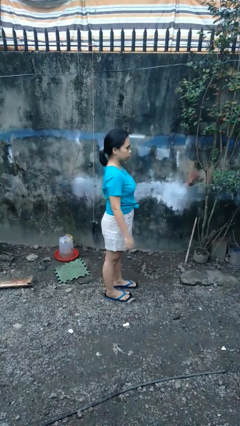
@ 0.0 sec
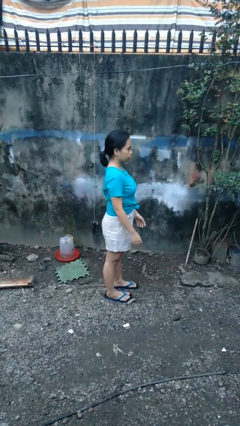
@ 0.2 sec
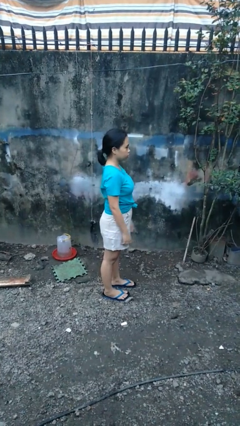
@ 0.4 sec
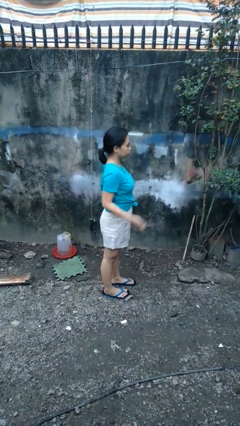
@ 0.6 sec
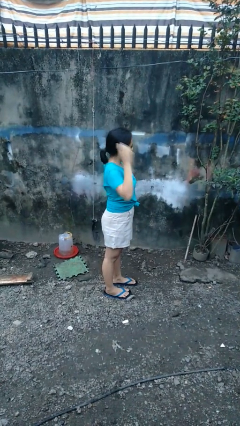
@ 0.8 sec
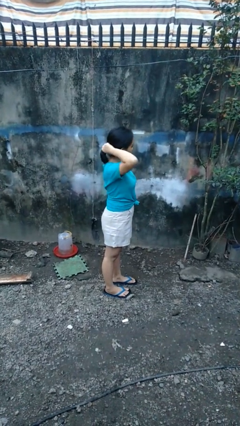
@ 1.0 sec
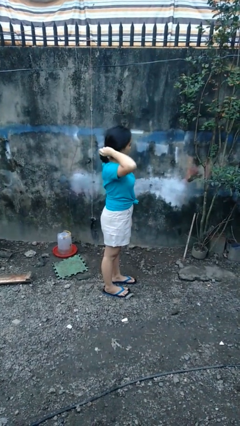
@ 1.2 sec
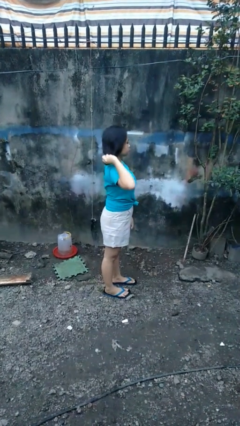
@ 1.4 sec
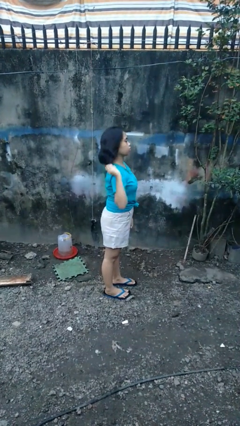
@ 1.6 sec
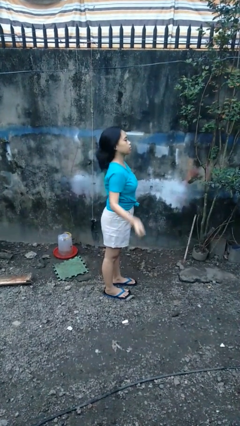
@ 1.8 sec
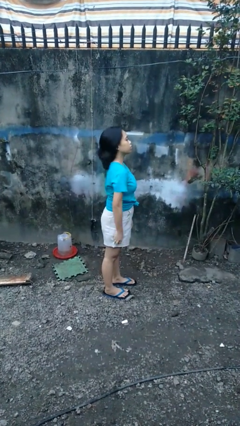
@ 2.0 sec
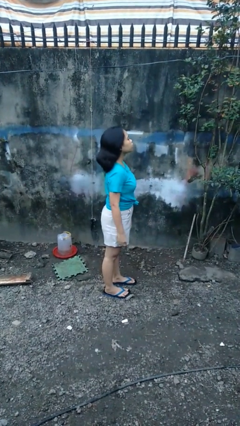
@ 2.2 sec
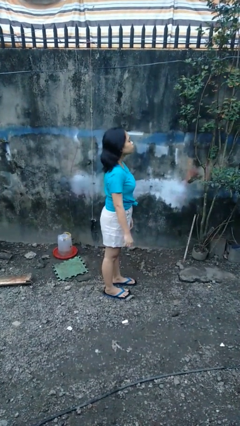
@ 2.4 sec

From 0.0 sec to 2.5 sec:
person takes off hairtie

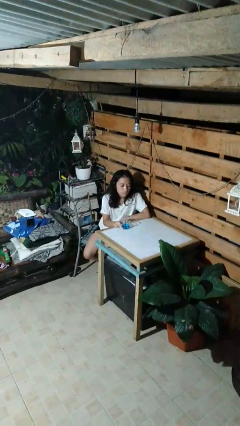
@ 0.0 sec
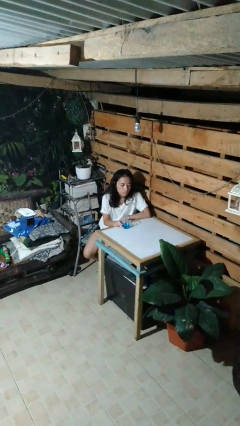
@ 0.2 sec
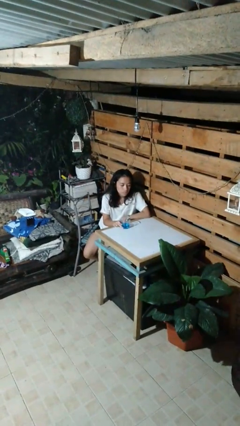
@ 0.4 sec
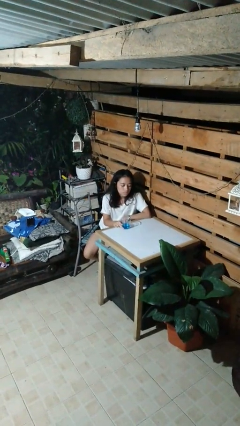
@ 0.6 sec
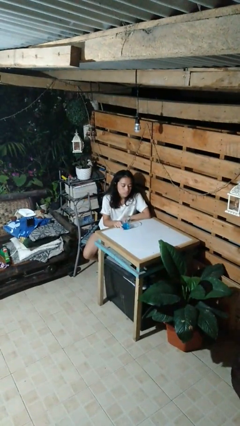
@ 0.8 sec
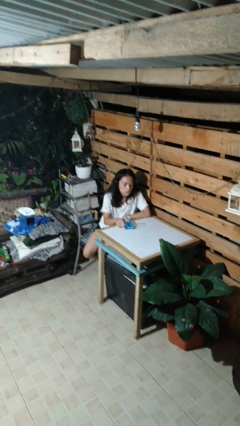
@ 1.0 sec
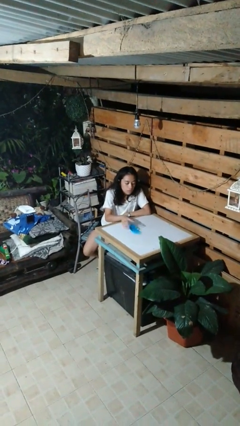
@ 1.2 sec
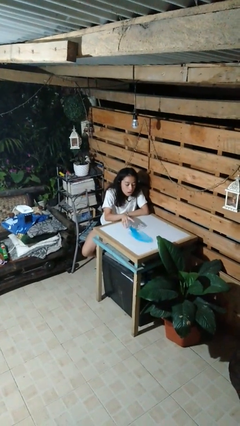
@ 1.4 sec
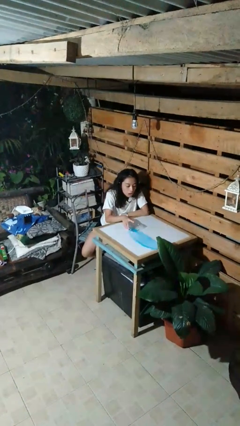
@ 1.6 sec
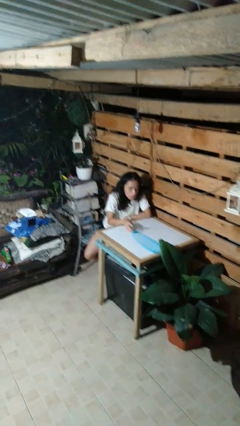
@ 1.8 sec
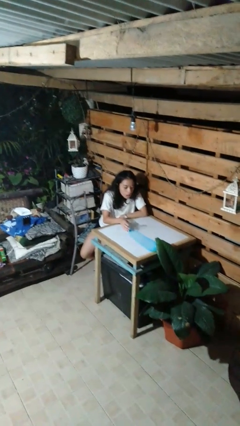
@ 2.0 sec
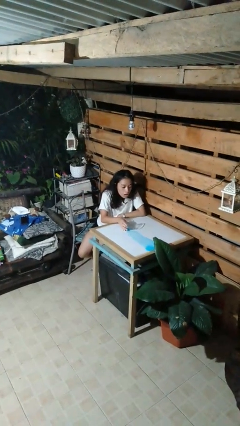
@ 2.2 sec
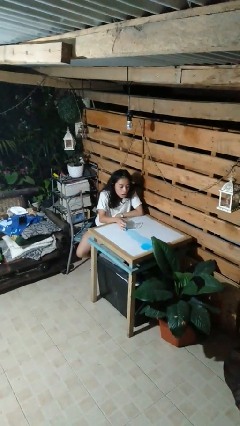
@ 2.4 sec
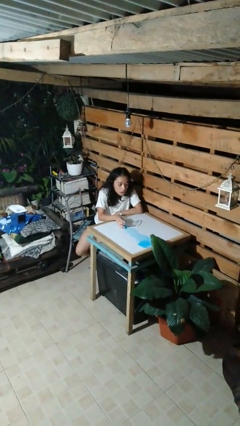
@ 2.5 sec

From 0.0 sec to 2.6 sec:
person spills on table

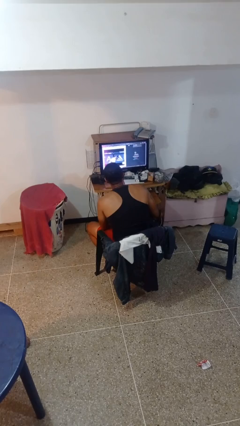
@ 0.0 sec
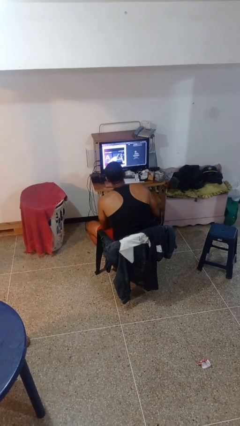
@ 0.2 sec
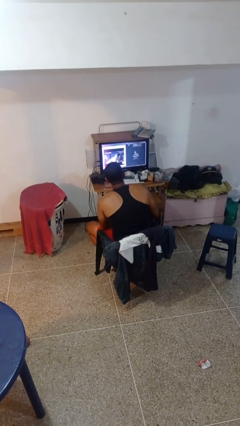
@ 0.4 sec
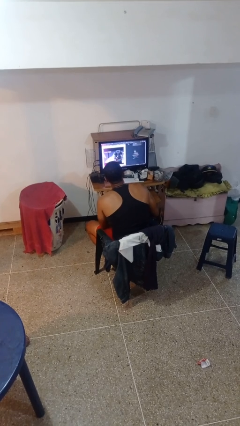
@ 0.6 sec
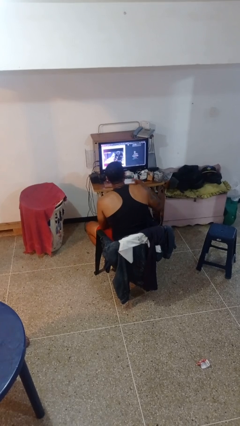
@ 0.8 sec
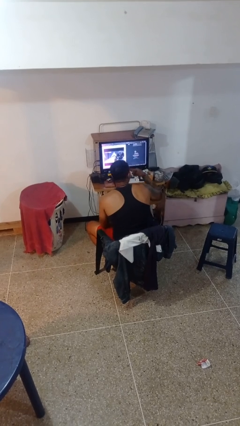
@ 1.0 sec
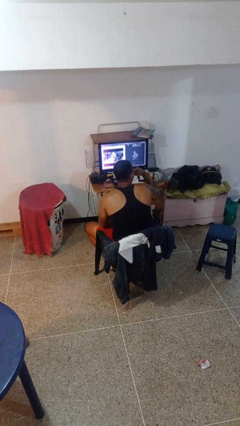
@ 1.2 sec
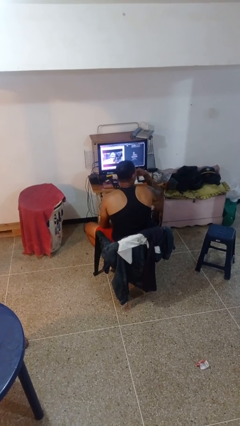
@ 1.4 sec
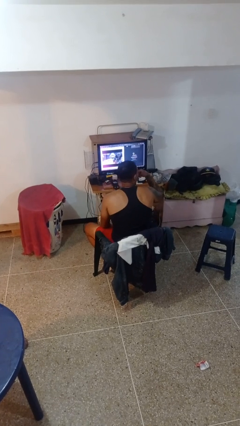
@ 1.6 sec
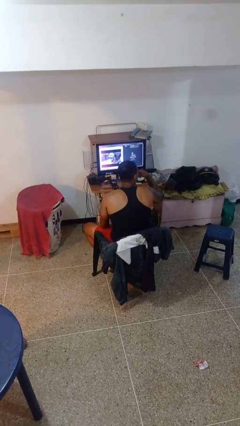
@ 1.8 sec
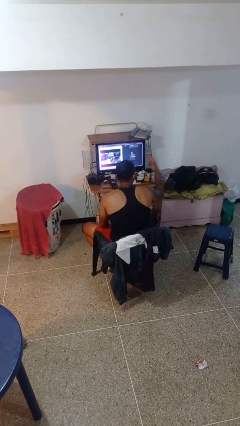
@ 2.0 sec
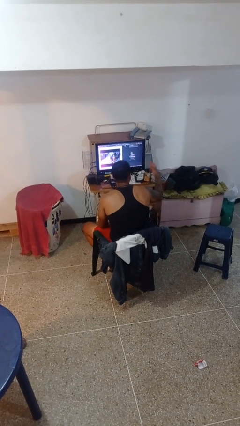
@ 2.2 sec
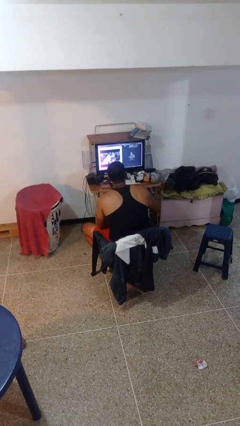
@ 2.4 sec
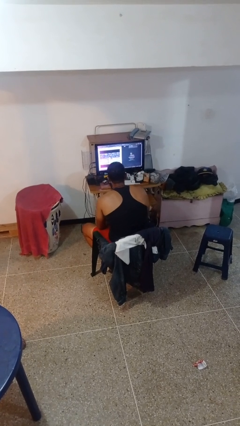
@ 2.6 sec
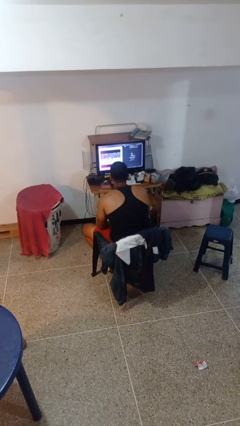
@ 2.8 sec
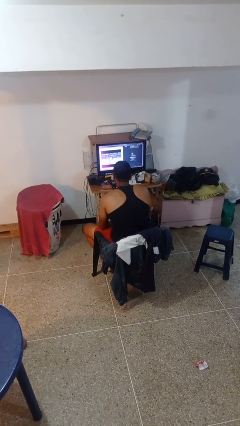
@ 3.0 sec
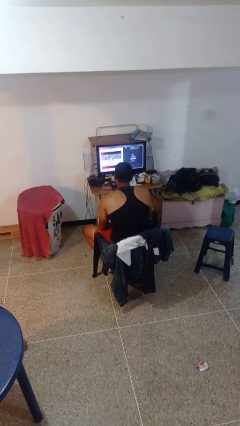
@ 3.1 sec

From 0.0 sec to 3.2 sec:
person gestures watch closely

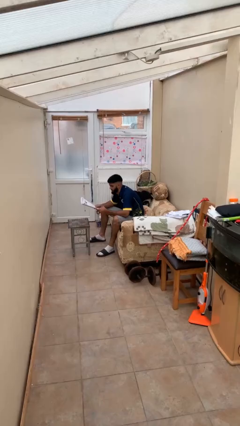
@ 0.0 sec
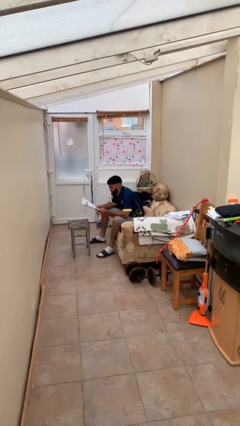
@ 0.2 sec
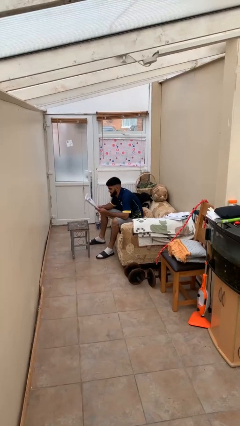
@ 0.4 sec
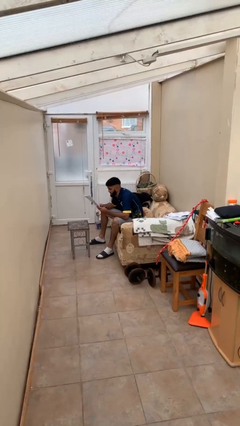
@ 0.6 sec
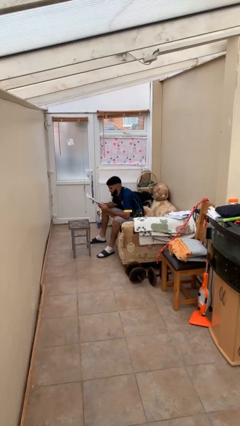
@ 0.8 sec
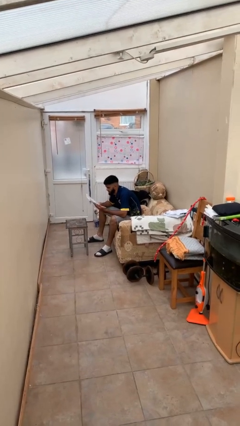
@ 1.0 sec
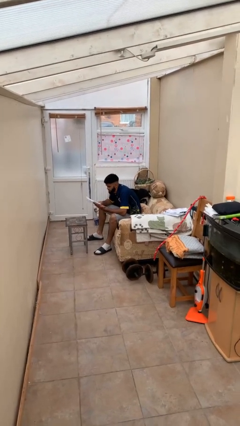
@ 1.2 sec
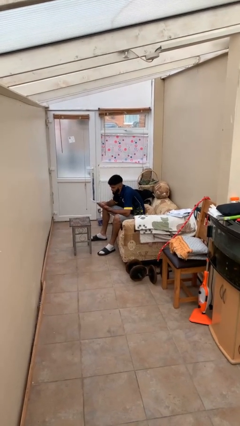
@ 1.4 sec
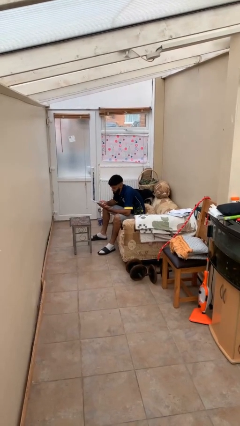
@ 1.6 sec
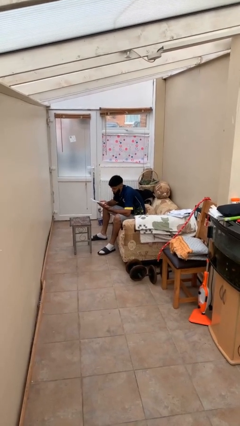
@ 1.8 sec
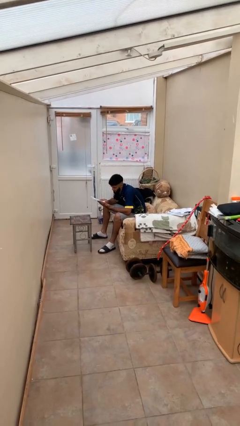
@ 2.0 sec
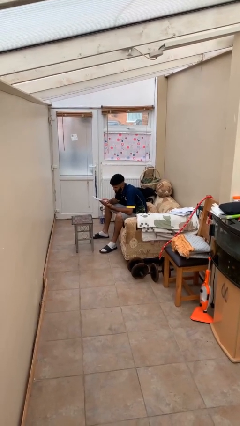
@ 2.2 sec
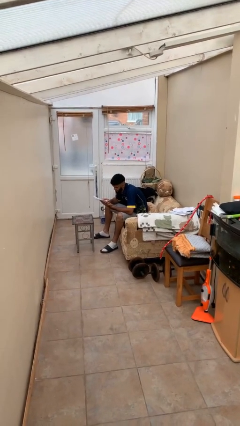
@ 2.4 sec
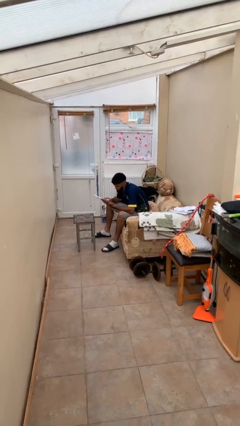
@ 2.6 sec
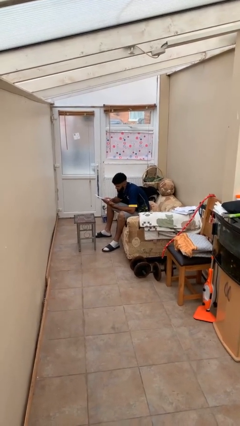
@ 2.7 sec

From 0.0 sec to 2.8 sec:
person reads document

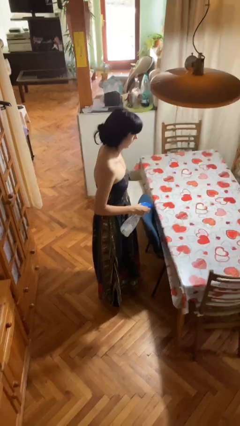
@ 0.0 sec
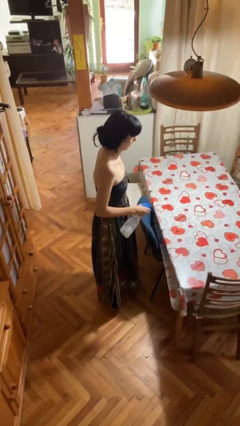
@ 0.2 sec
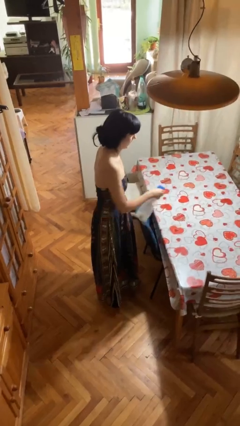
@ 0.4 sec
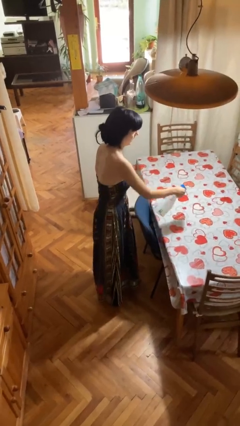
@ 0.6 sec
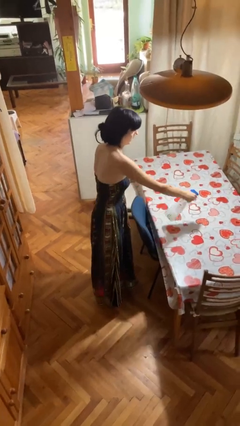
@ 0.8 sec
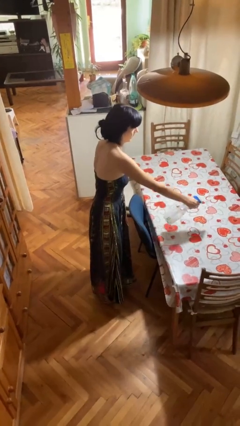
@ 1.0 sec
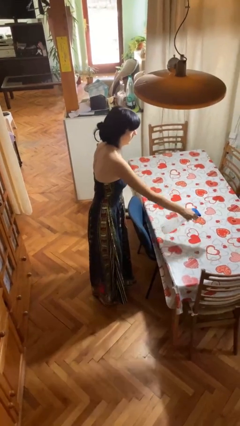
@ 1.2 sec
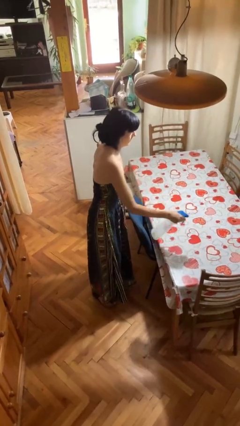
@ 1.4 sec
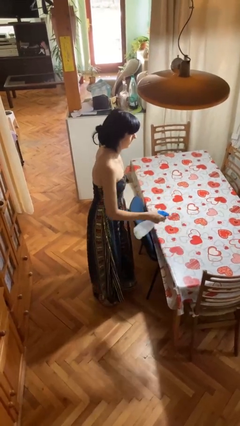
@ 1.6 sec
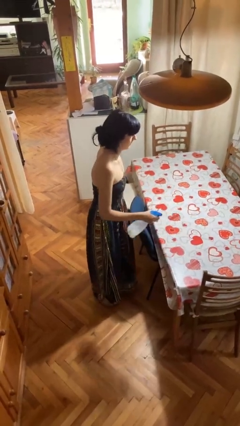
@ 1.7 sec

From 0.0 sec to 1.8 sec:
person sprays from bottle

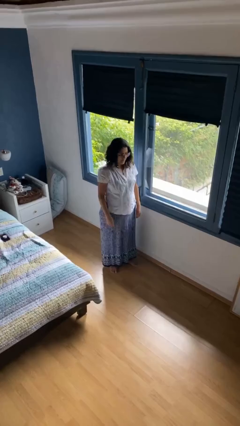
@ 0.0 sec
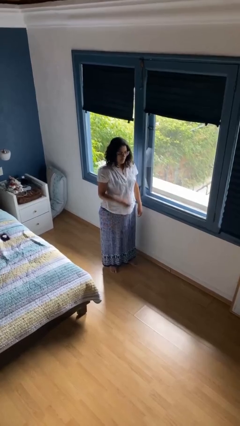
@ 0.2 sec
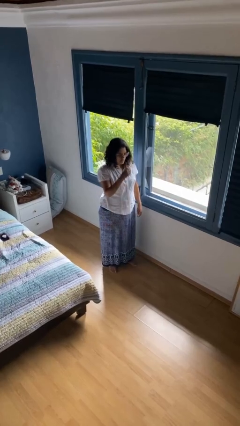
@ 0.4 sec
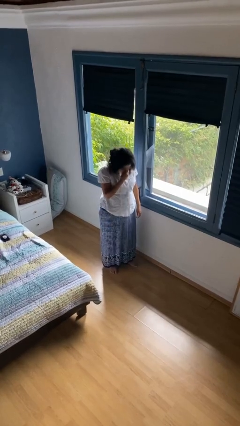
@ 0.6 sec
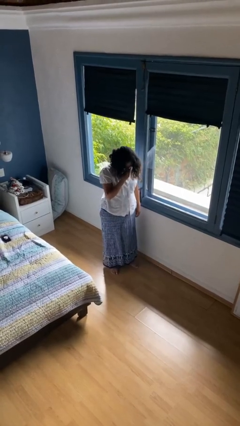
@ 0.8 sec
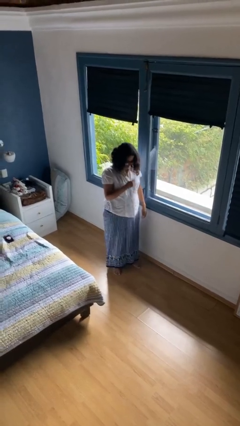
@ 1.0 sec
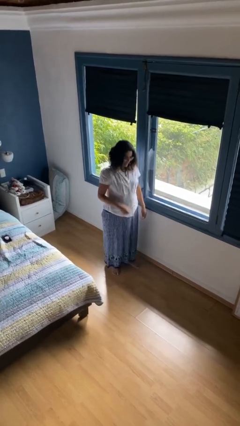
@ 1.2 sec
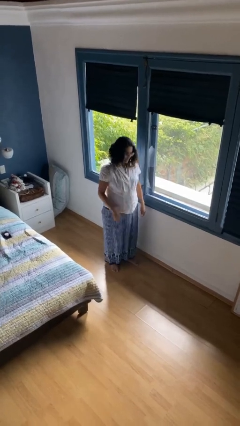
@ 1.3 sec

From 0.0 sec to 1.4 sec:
person sneezes into hand

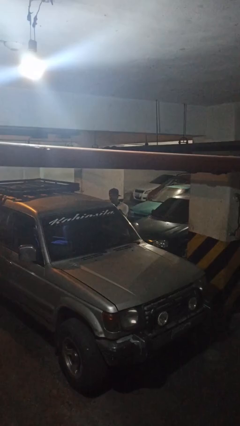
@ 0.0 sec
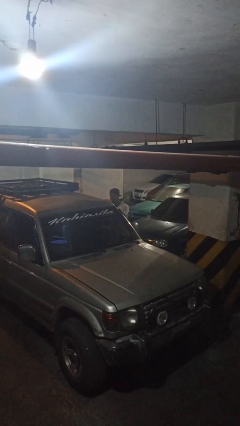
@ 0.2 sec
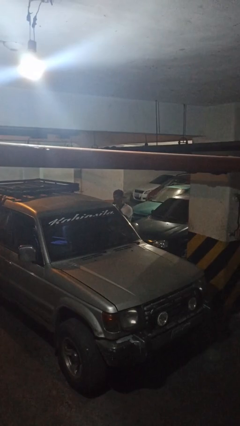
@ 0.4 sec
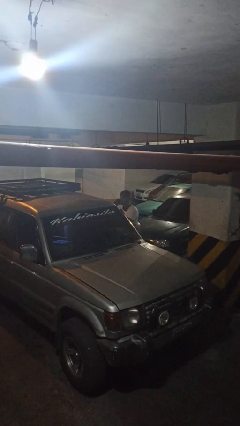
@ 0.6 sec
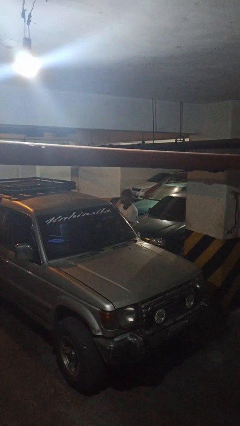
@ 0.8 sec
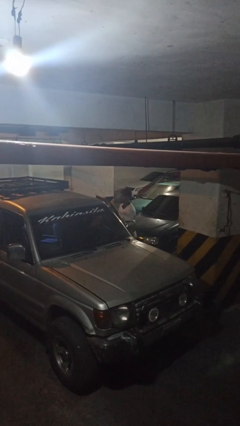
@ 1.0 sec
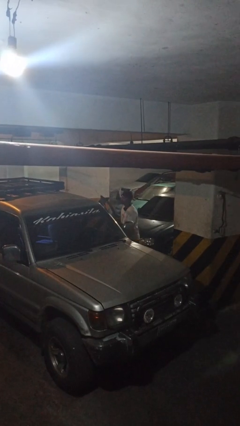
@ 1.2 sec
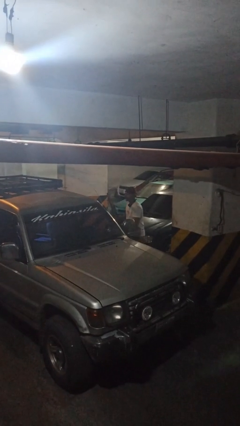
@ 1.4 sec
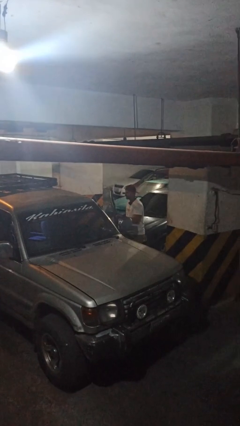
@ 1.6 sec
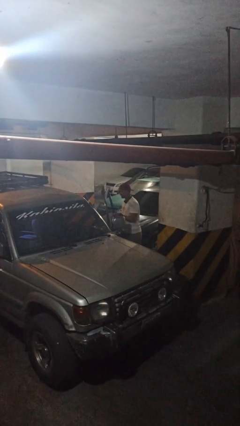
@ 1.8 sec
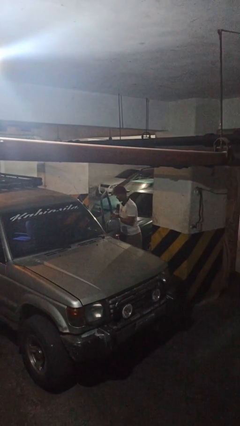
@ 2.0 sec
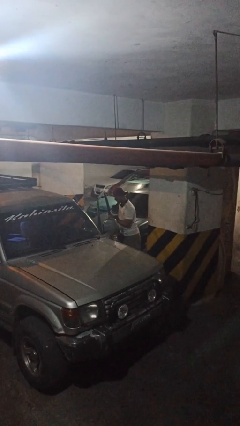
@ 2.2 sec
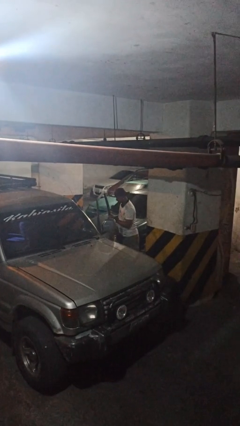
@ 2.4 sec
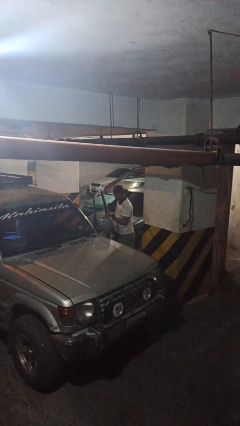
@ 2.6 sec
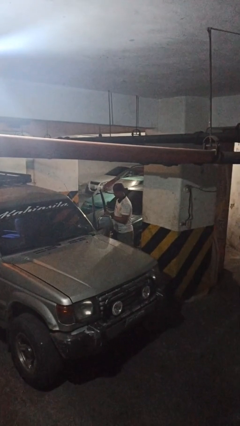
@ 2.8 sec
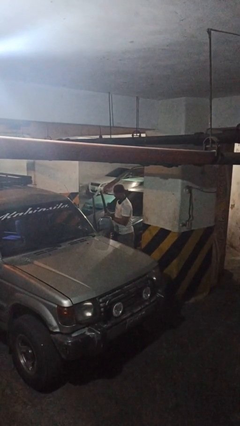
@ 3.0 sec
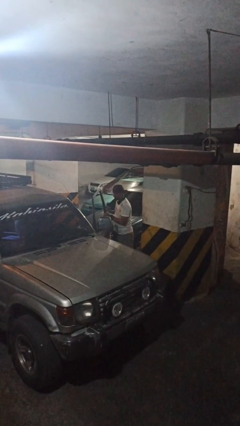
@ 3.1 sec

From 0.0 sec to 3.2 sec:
person opens car door
